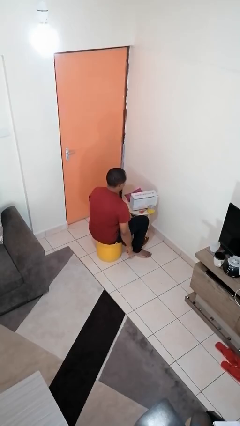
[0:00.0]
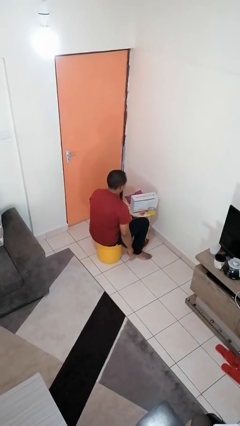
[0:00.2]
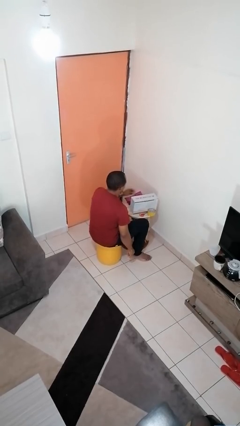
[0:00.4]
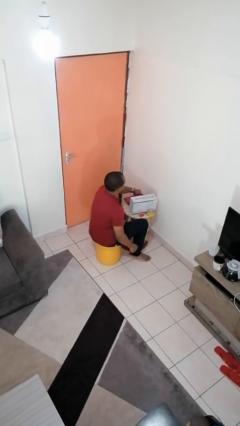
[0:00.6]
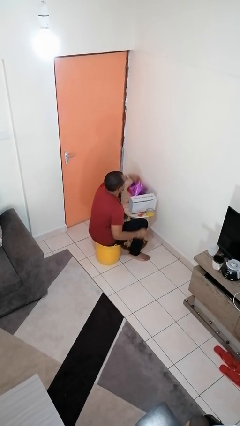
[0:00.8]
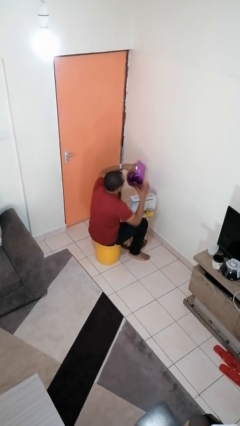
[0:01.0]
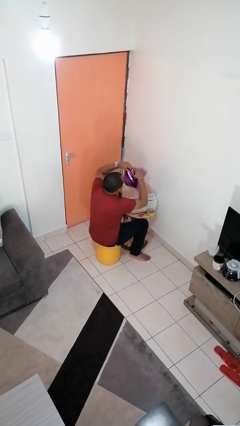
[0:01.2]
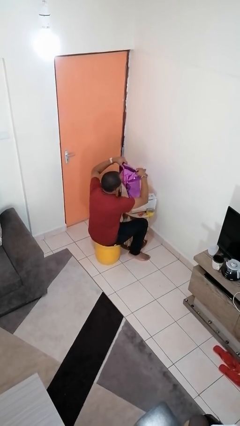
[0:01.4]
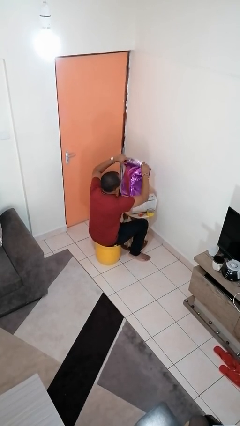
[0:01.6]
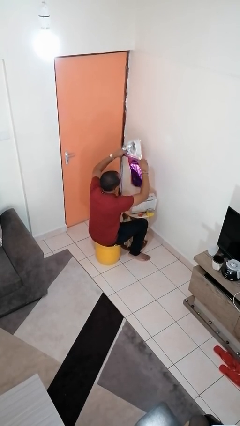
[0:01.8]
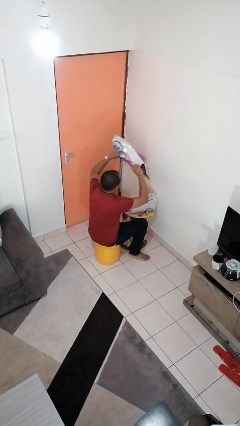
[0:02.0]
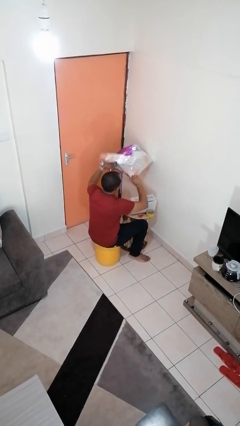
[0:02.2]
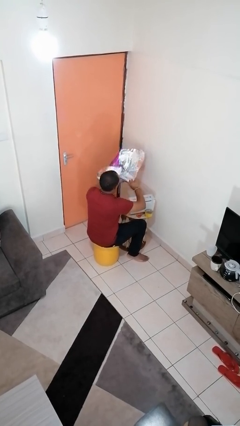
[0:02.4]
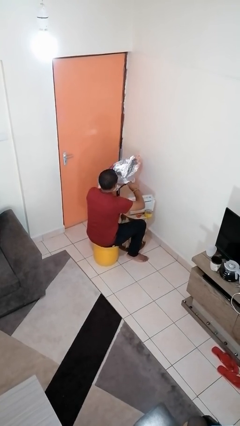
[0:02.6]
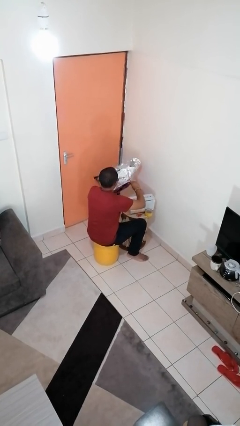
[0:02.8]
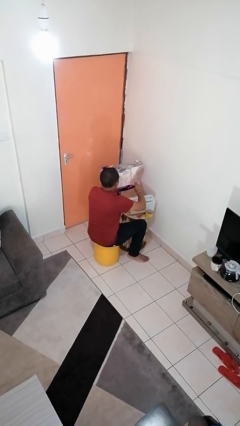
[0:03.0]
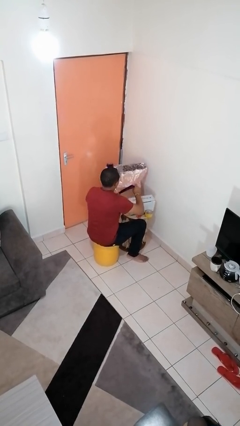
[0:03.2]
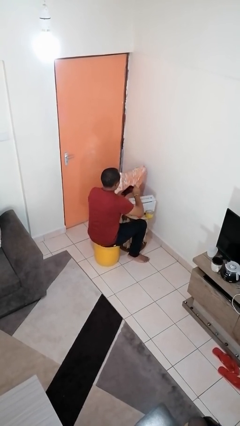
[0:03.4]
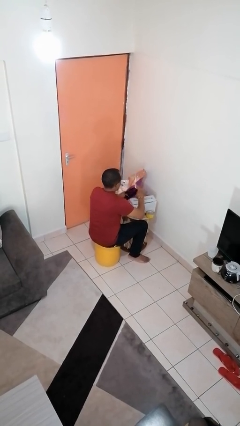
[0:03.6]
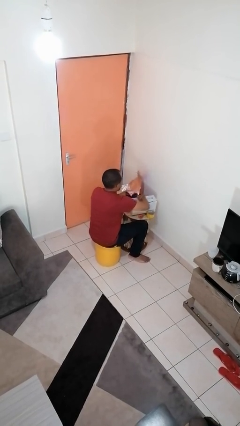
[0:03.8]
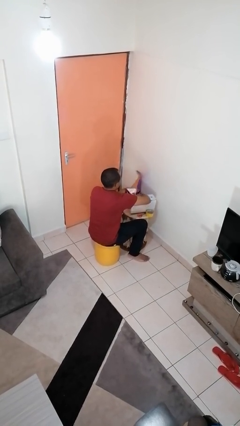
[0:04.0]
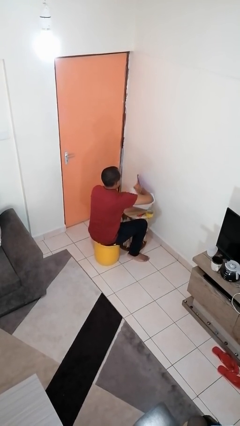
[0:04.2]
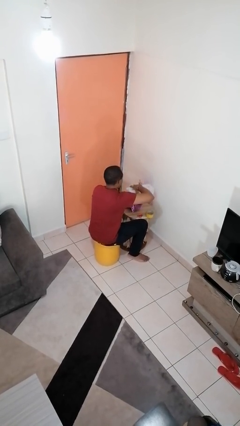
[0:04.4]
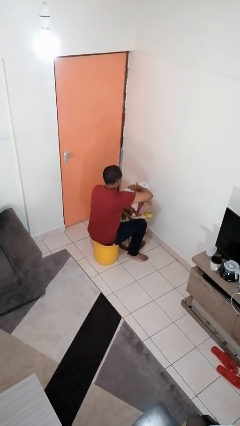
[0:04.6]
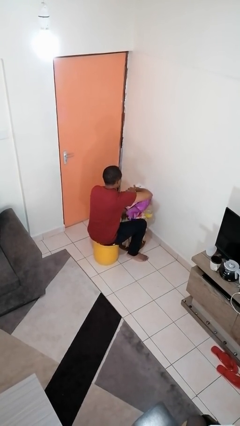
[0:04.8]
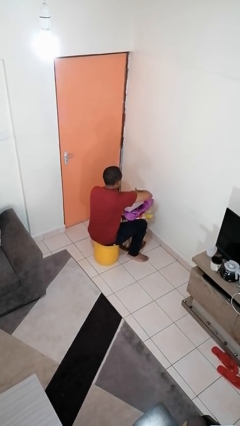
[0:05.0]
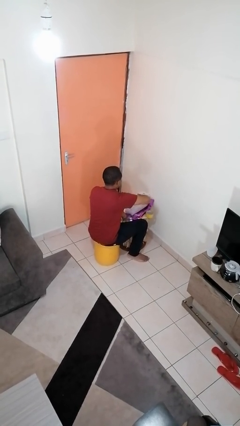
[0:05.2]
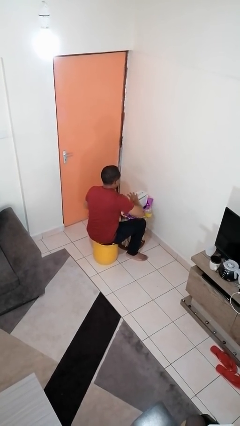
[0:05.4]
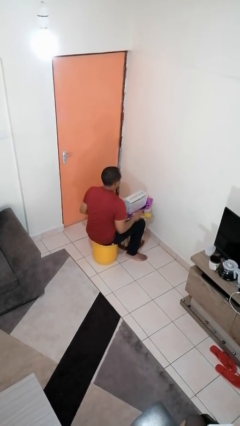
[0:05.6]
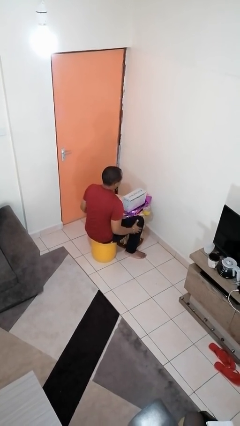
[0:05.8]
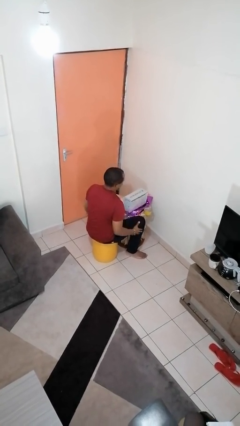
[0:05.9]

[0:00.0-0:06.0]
person wraps box

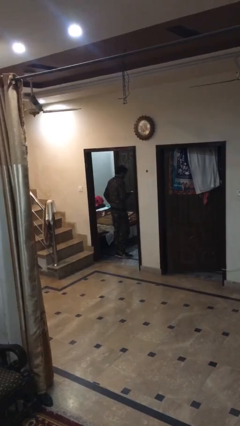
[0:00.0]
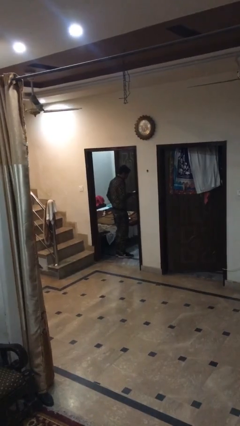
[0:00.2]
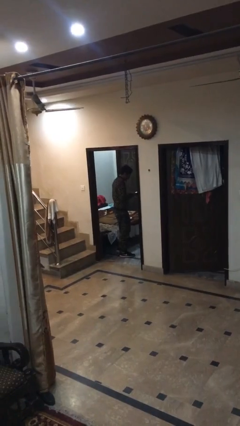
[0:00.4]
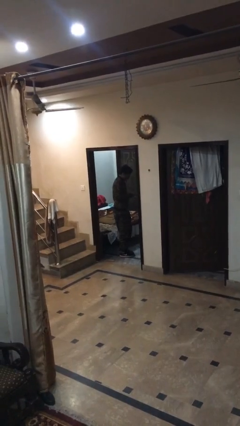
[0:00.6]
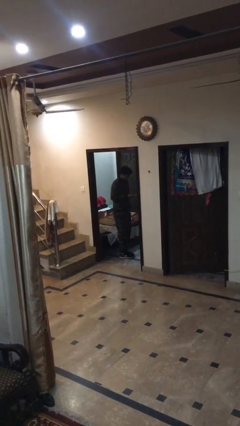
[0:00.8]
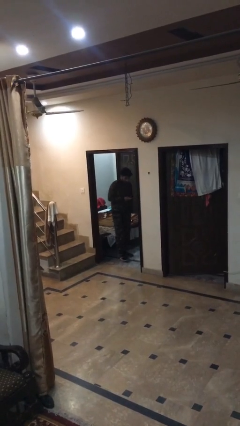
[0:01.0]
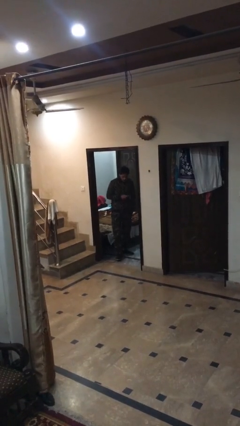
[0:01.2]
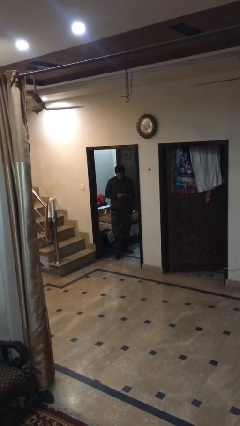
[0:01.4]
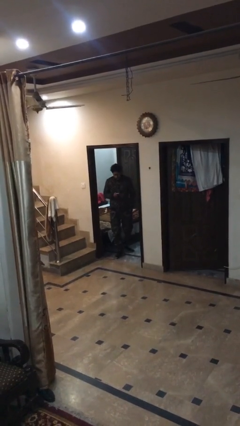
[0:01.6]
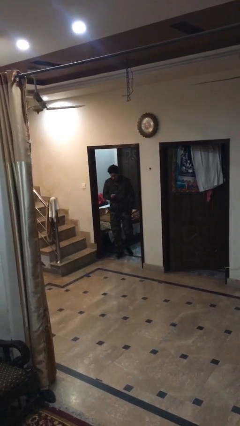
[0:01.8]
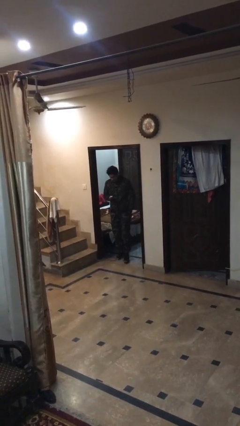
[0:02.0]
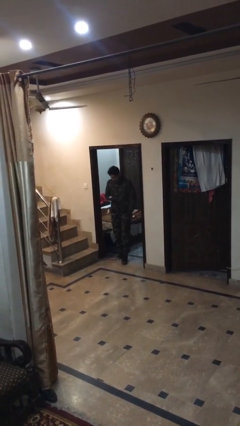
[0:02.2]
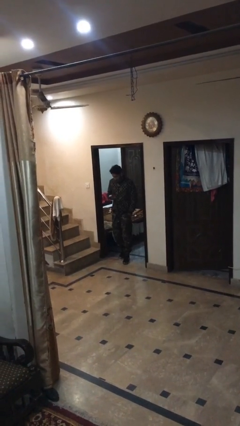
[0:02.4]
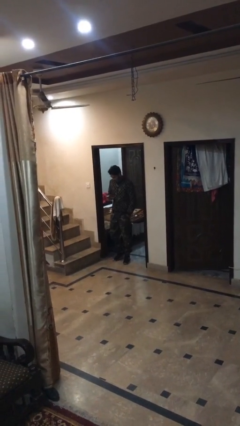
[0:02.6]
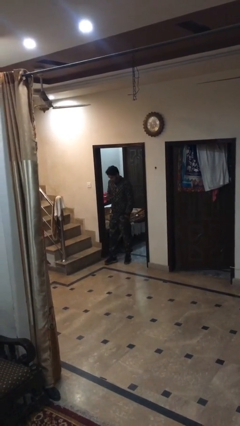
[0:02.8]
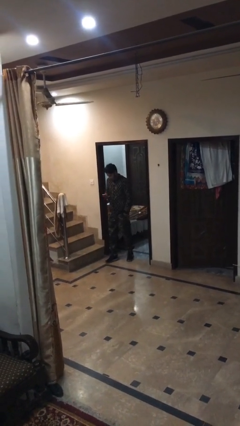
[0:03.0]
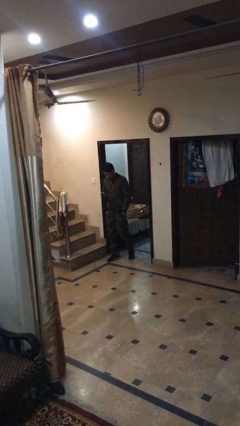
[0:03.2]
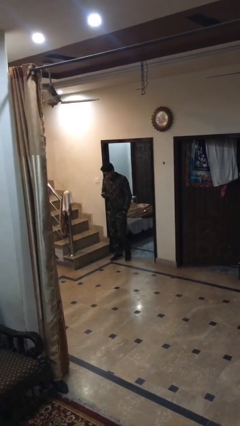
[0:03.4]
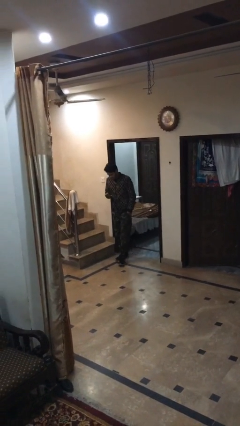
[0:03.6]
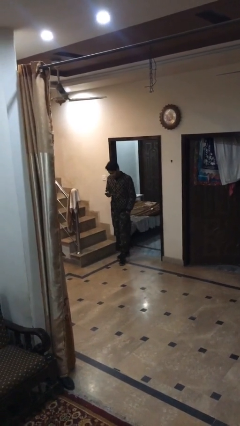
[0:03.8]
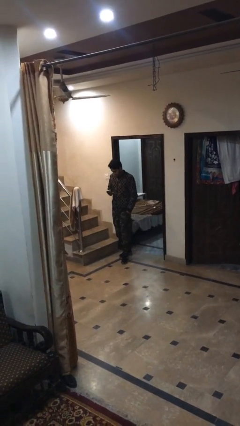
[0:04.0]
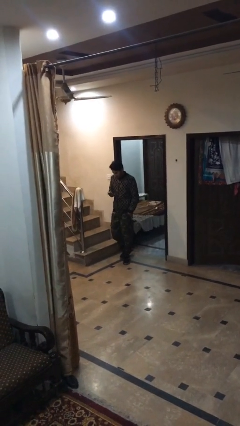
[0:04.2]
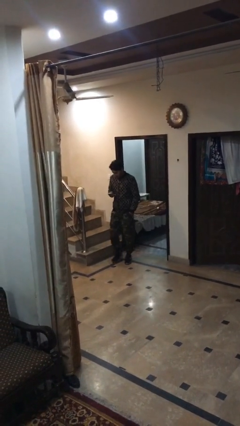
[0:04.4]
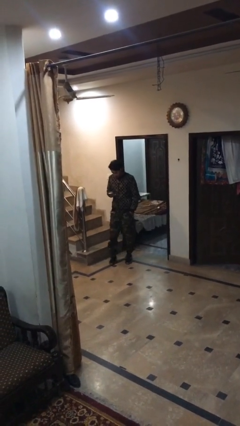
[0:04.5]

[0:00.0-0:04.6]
person exits scene through structure

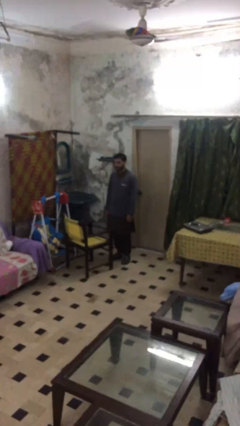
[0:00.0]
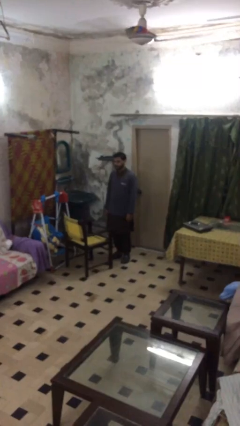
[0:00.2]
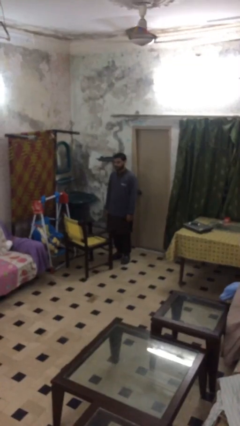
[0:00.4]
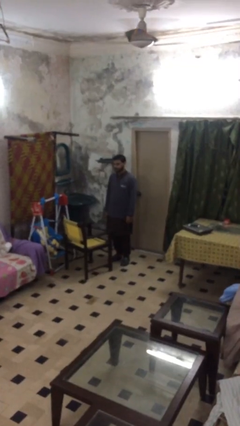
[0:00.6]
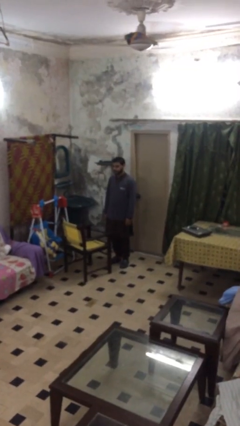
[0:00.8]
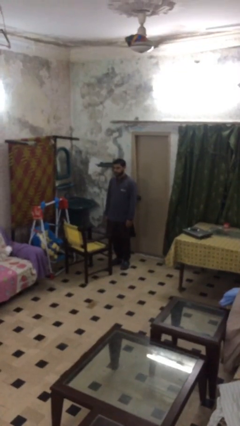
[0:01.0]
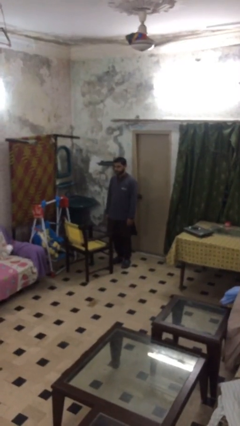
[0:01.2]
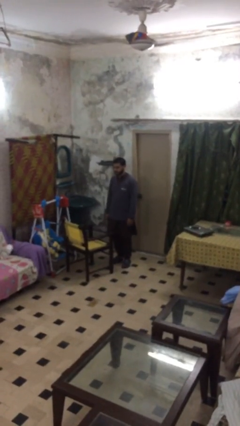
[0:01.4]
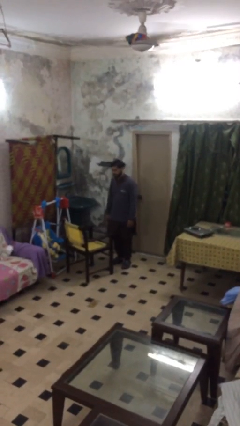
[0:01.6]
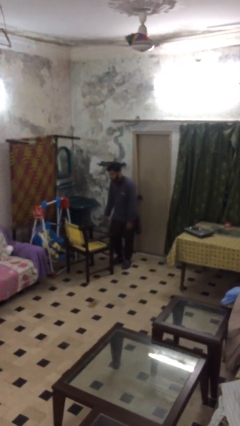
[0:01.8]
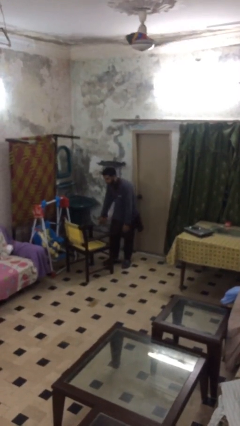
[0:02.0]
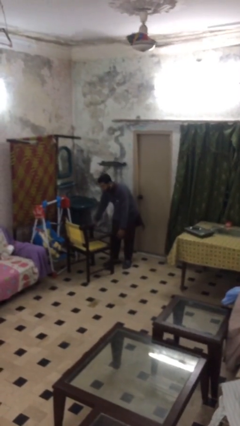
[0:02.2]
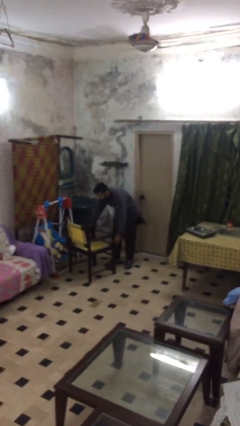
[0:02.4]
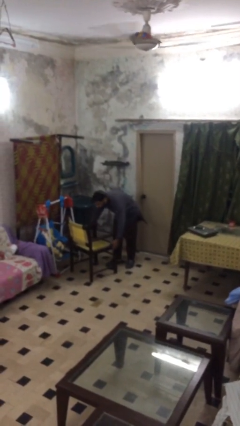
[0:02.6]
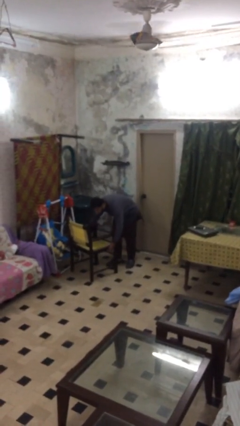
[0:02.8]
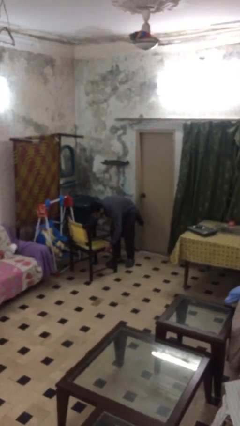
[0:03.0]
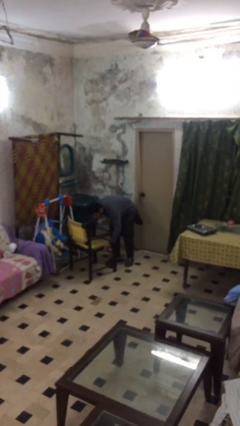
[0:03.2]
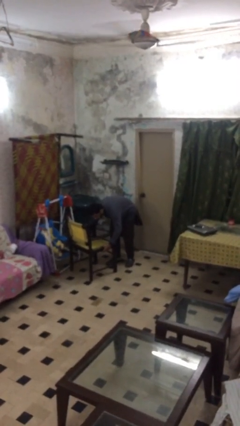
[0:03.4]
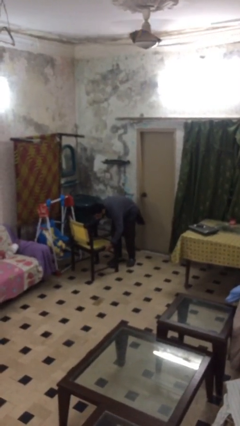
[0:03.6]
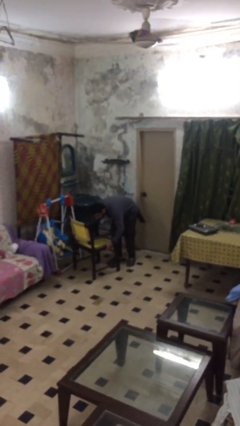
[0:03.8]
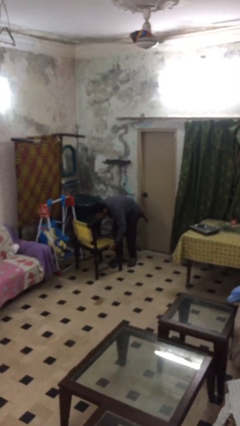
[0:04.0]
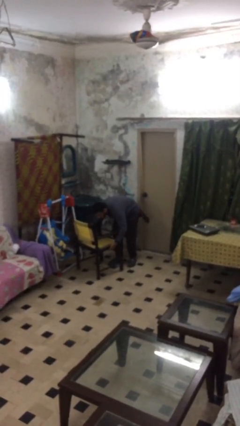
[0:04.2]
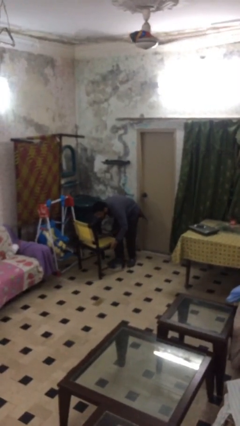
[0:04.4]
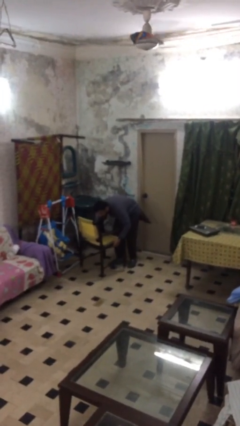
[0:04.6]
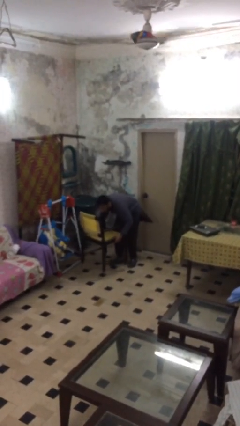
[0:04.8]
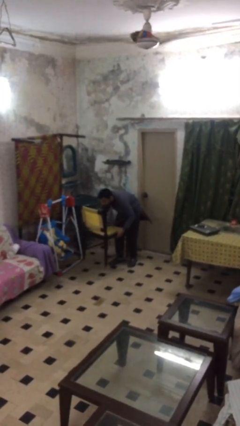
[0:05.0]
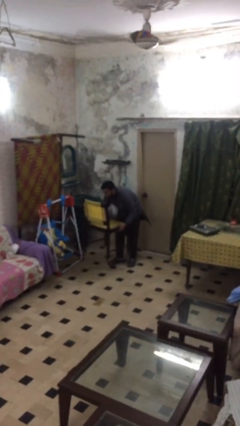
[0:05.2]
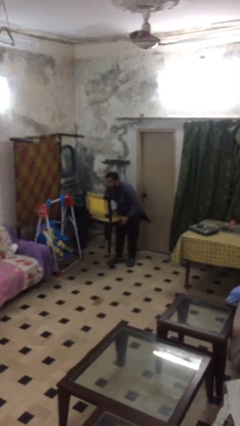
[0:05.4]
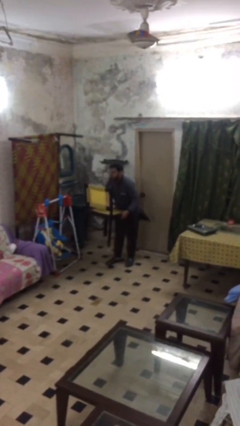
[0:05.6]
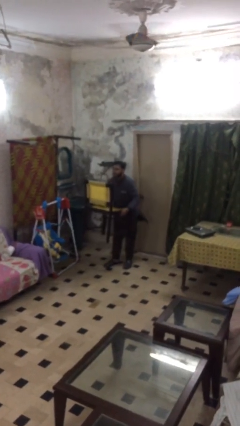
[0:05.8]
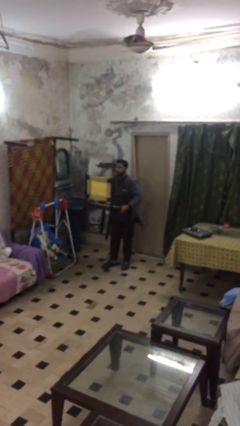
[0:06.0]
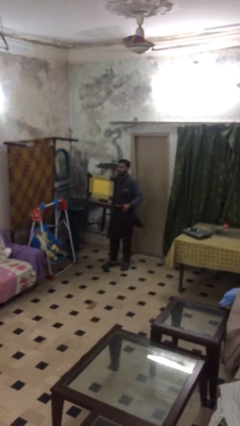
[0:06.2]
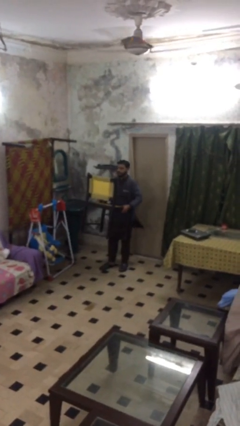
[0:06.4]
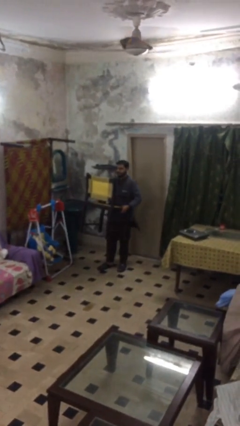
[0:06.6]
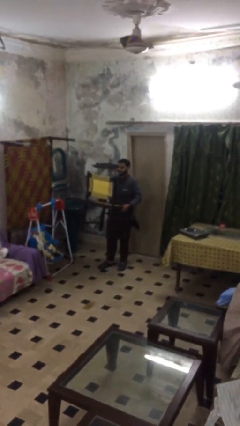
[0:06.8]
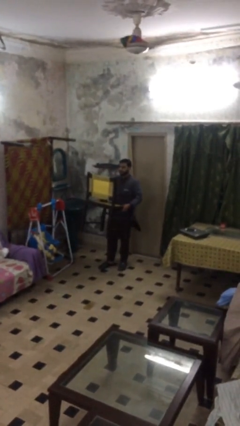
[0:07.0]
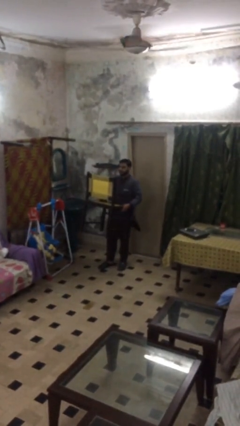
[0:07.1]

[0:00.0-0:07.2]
person picks up object from floor

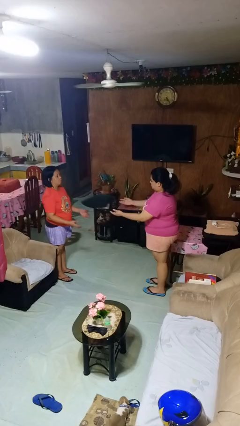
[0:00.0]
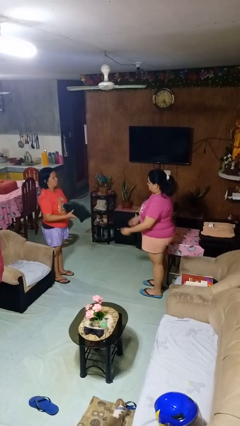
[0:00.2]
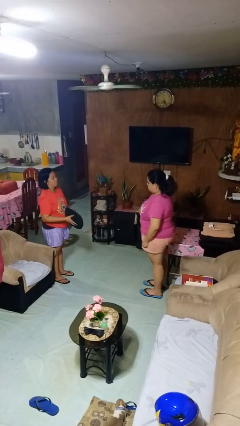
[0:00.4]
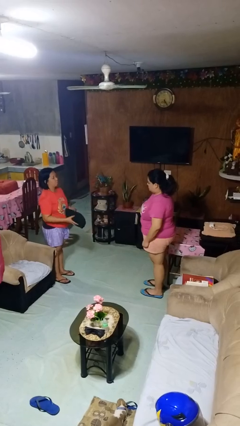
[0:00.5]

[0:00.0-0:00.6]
person throws object to person
